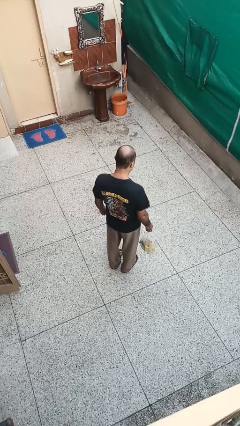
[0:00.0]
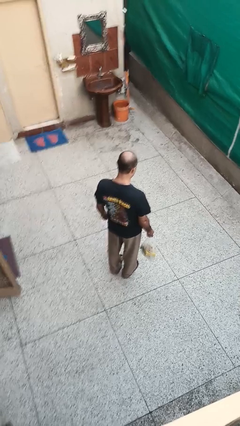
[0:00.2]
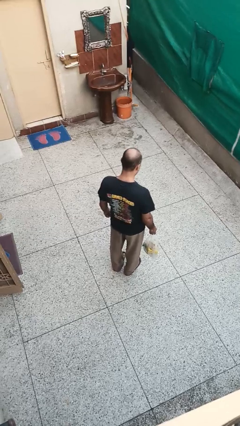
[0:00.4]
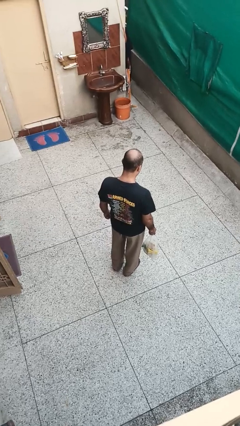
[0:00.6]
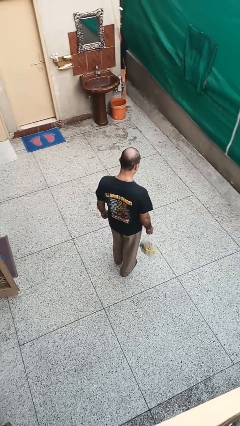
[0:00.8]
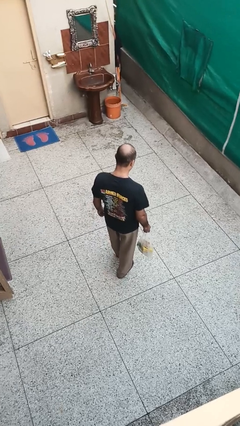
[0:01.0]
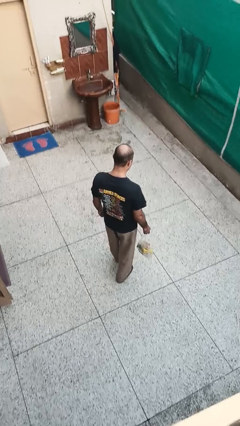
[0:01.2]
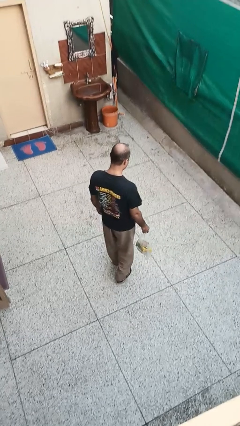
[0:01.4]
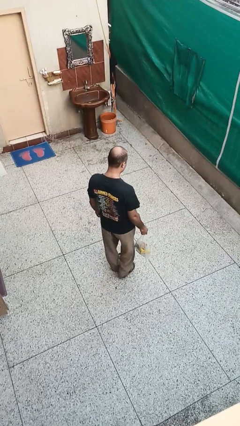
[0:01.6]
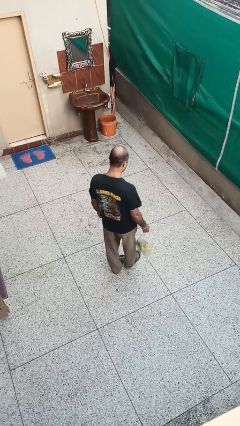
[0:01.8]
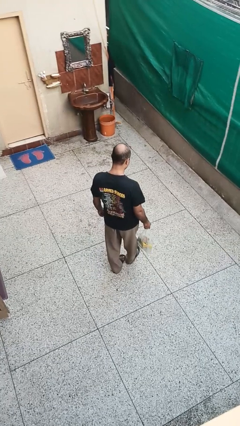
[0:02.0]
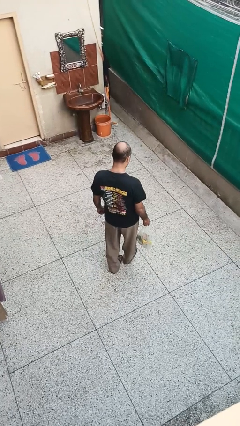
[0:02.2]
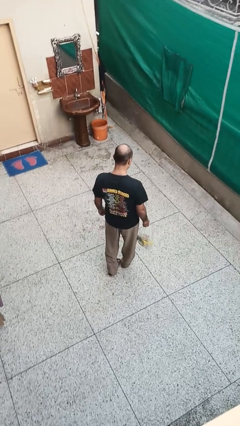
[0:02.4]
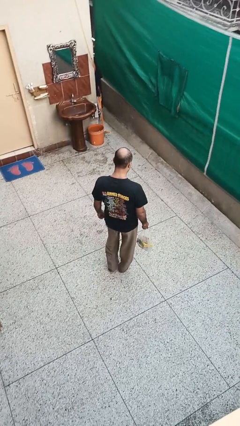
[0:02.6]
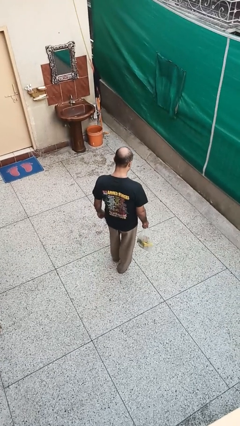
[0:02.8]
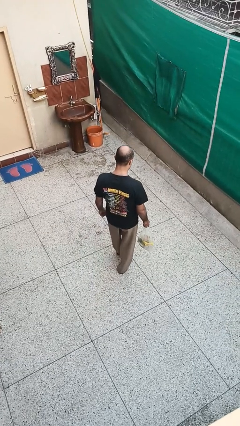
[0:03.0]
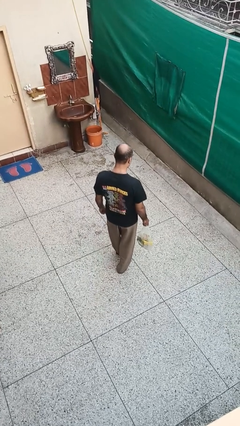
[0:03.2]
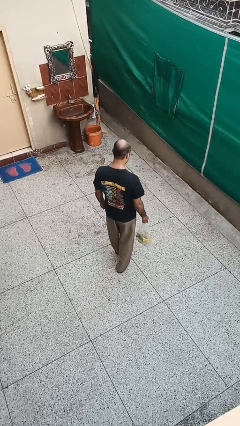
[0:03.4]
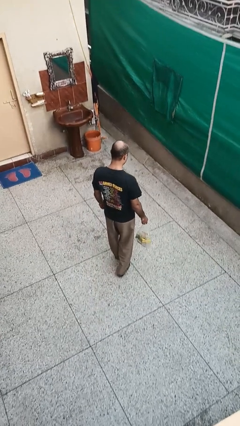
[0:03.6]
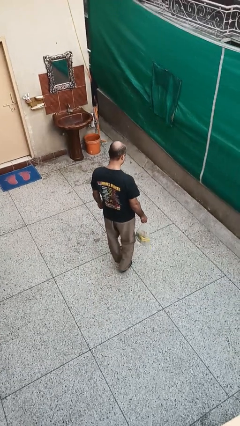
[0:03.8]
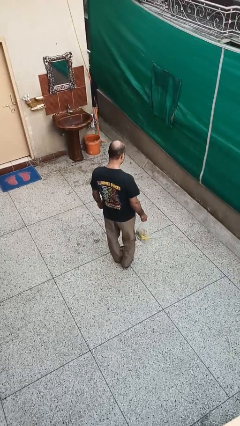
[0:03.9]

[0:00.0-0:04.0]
person carries groceries

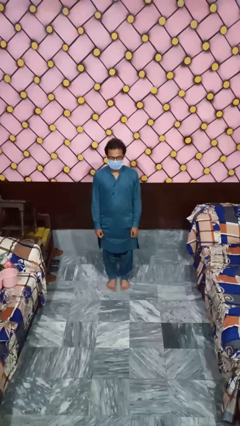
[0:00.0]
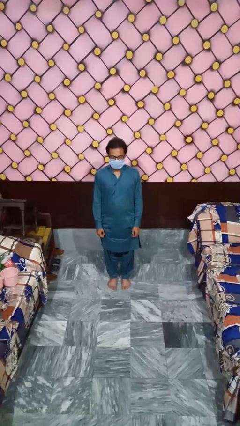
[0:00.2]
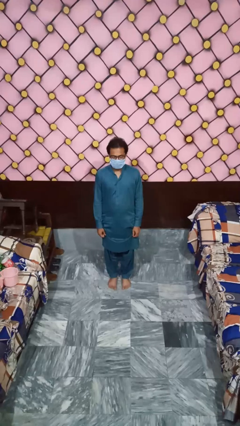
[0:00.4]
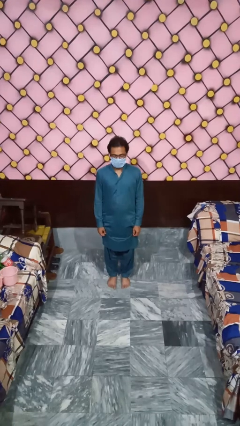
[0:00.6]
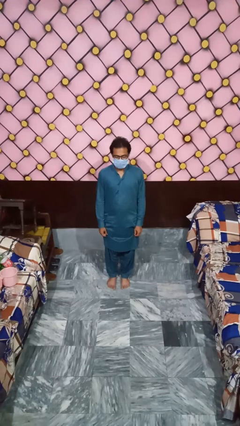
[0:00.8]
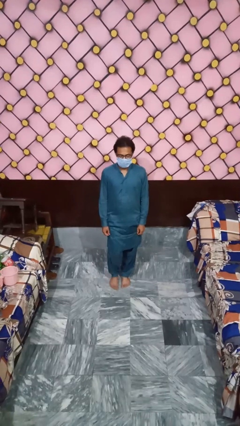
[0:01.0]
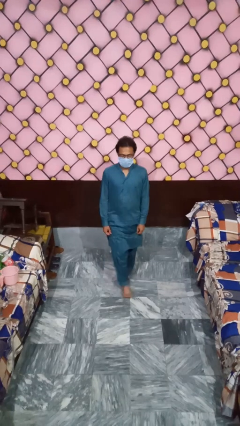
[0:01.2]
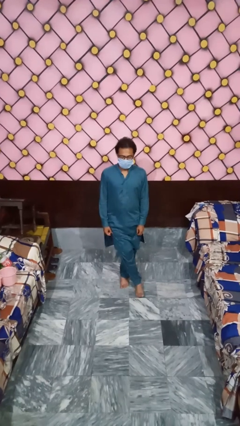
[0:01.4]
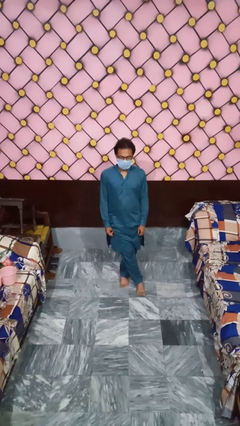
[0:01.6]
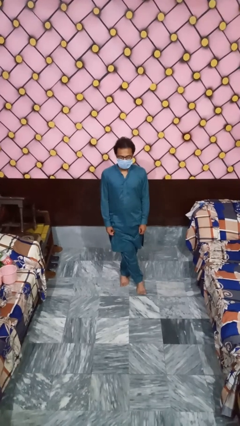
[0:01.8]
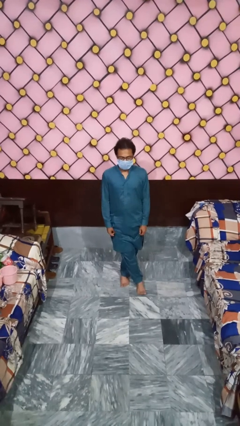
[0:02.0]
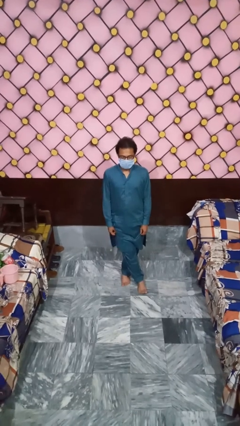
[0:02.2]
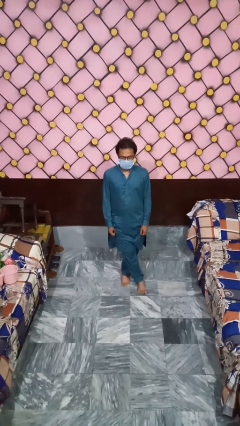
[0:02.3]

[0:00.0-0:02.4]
person crosses legs

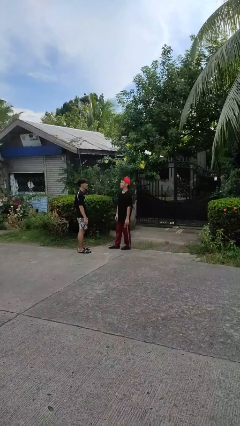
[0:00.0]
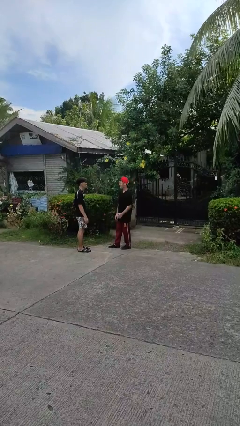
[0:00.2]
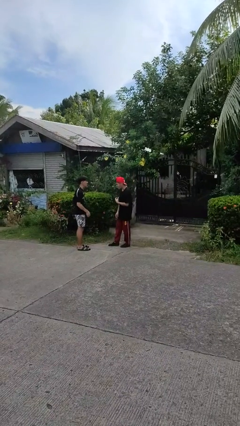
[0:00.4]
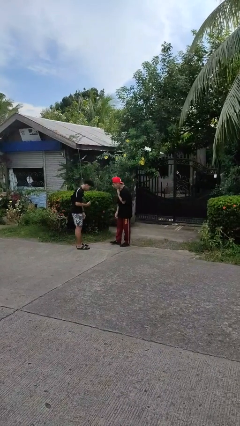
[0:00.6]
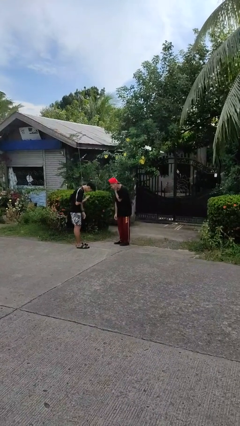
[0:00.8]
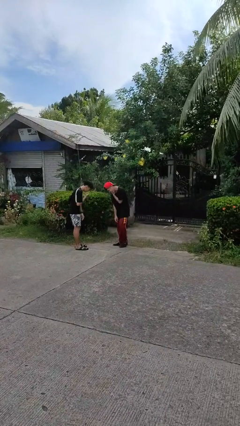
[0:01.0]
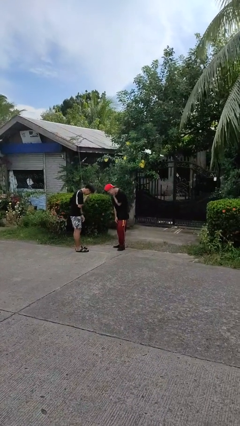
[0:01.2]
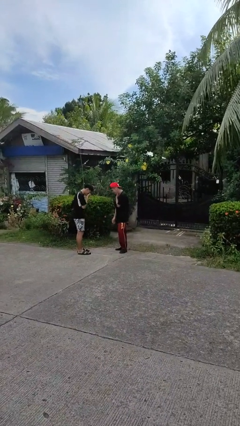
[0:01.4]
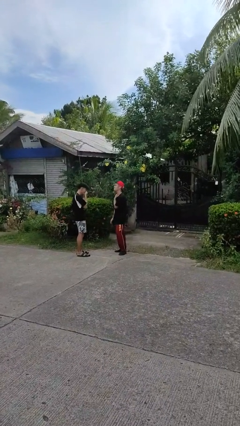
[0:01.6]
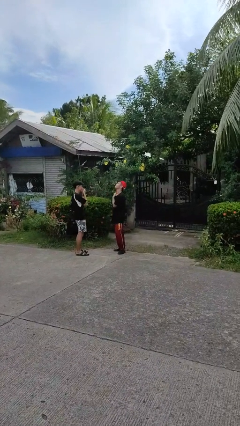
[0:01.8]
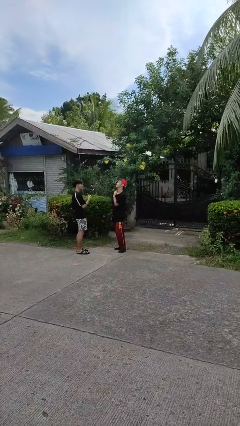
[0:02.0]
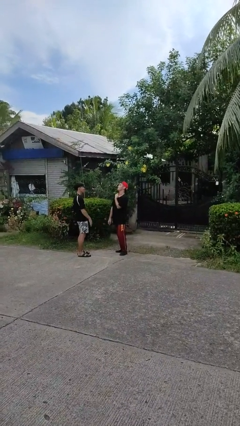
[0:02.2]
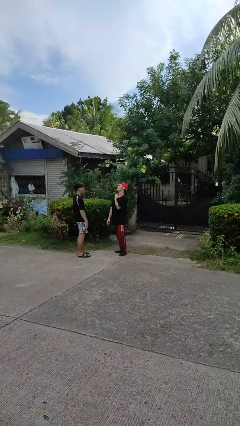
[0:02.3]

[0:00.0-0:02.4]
person laughs with person

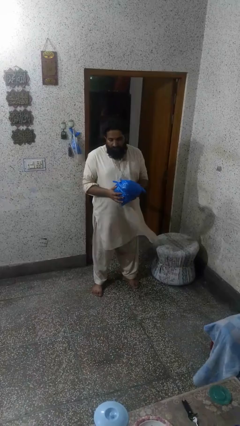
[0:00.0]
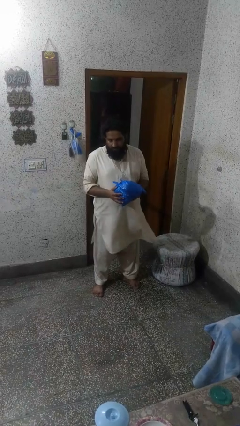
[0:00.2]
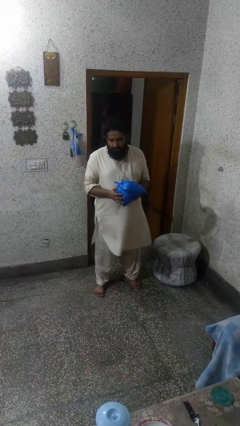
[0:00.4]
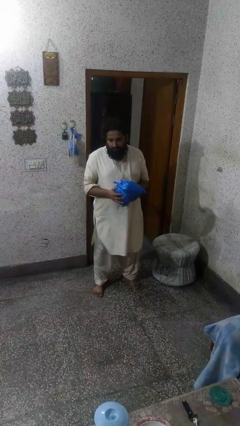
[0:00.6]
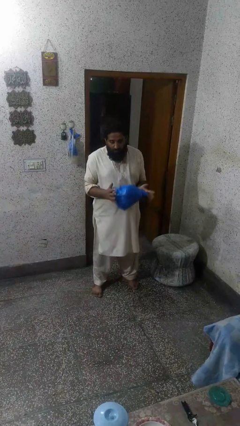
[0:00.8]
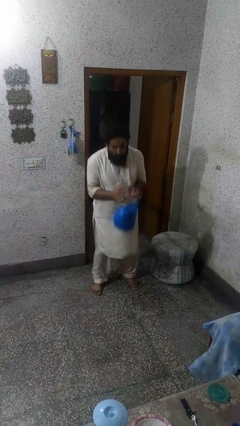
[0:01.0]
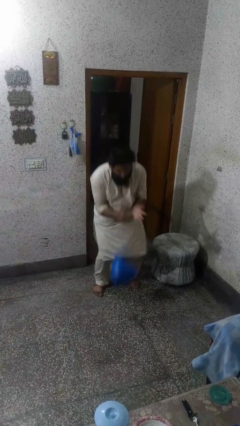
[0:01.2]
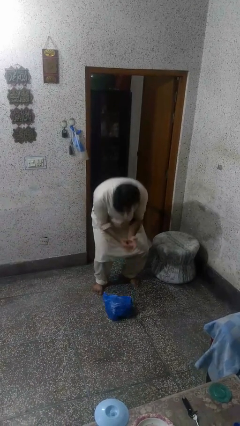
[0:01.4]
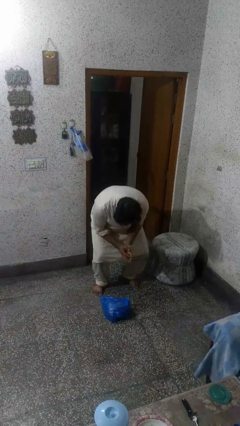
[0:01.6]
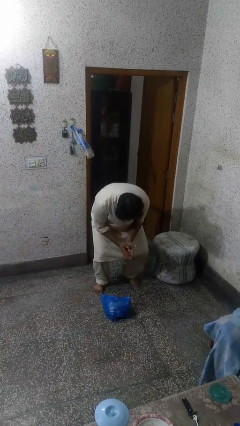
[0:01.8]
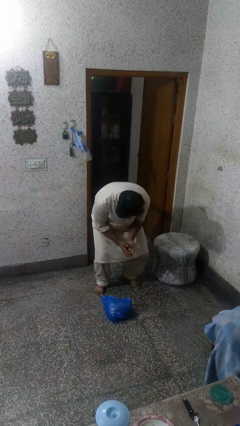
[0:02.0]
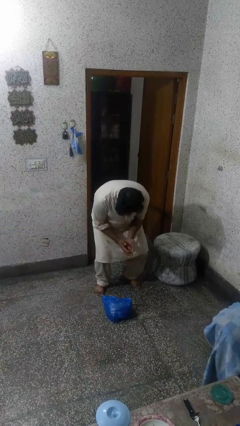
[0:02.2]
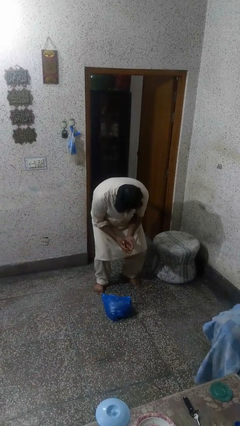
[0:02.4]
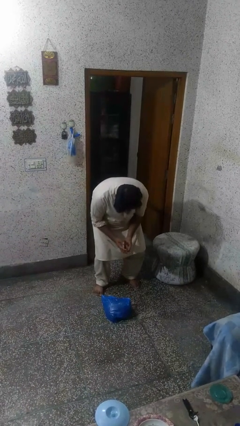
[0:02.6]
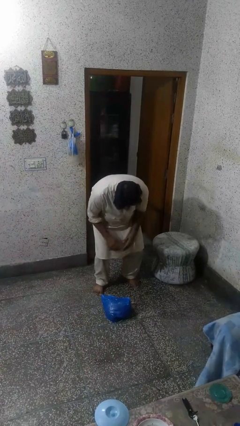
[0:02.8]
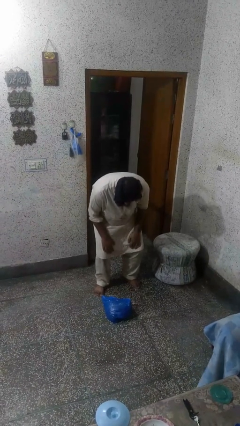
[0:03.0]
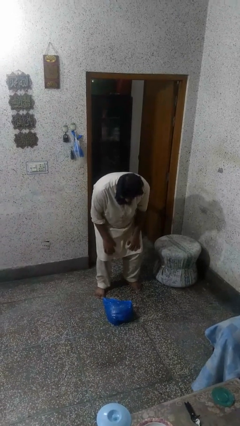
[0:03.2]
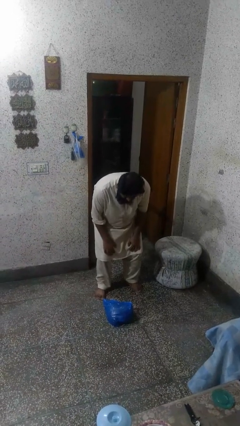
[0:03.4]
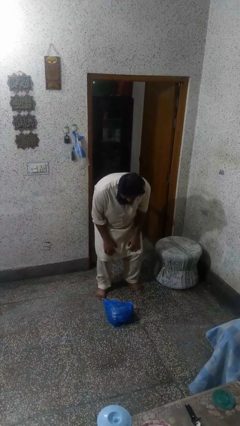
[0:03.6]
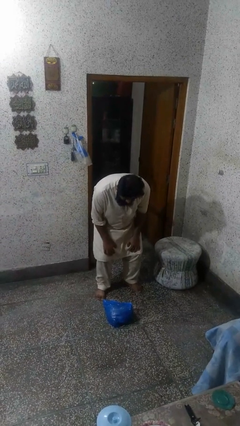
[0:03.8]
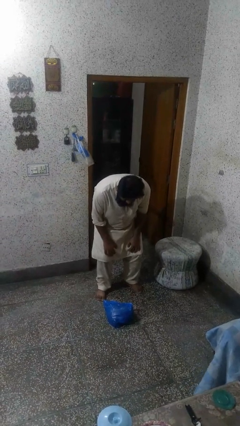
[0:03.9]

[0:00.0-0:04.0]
person drops object

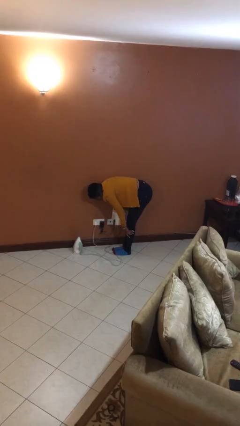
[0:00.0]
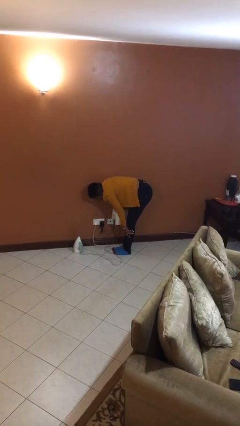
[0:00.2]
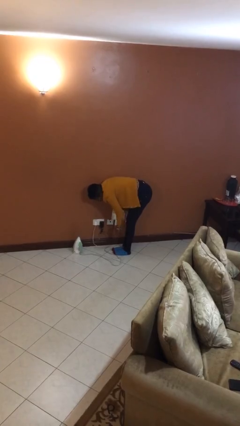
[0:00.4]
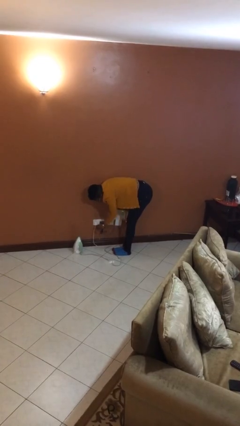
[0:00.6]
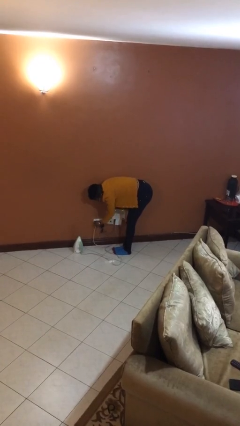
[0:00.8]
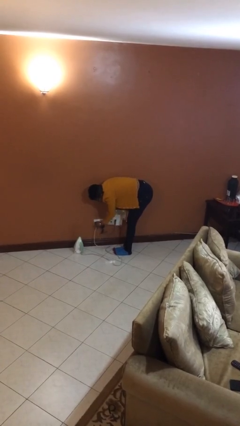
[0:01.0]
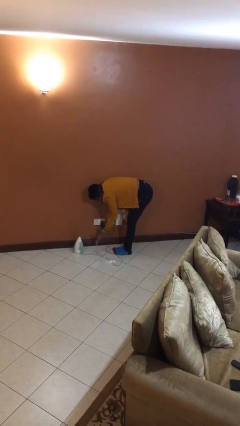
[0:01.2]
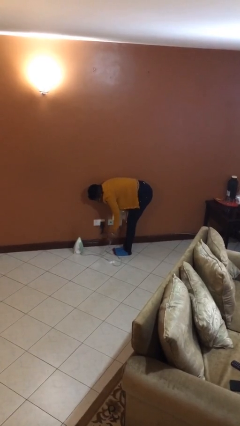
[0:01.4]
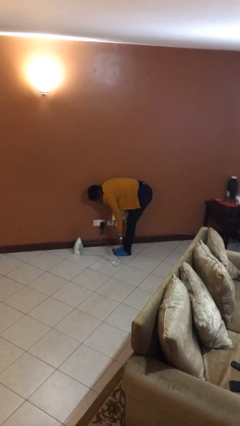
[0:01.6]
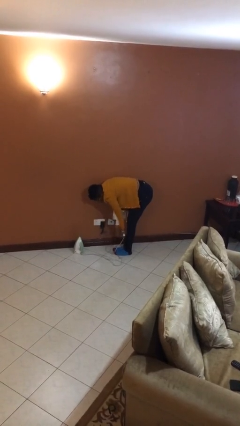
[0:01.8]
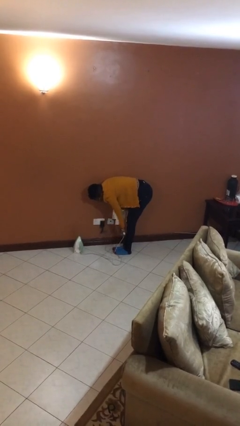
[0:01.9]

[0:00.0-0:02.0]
person unplugs from electrical socket

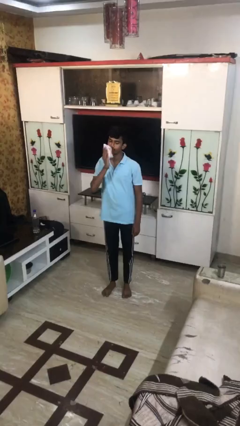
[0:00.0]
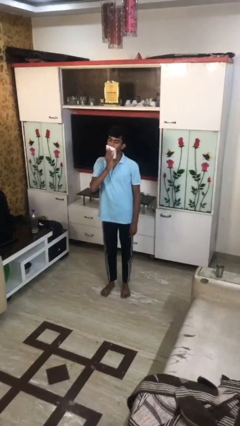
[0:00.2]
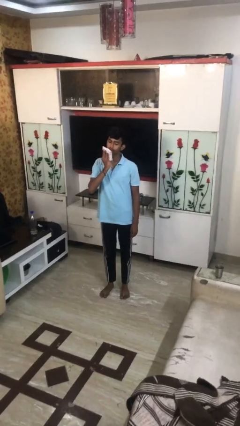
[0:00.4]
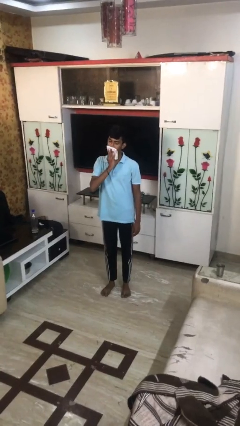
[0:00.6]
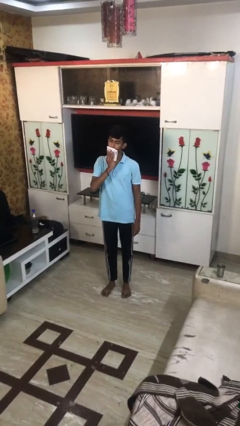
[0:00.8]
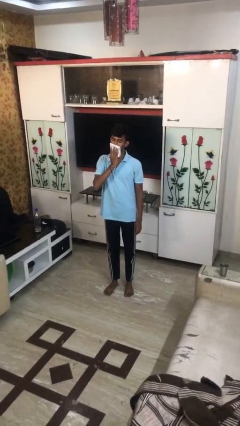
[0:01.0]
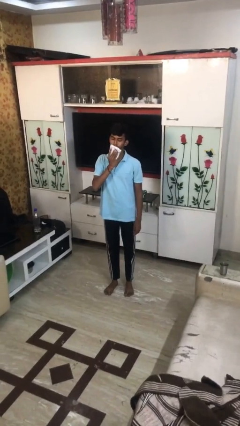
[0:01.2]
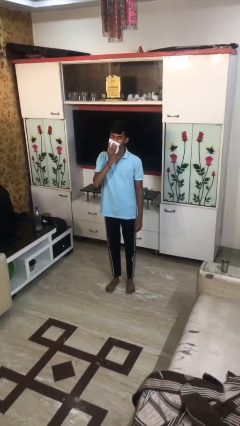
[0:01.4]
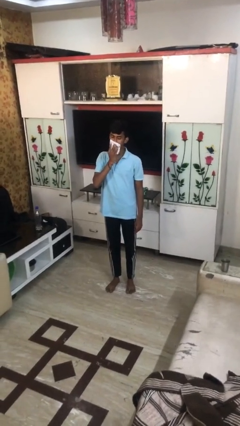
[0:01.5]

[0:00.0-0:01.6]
person wipes mouth with napkin

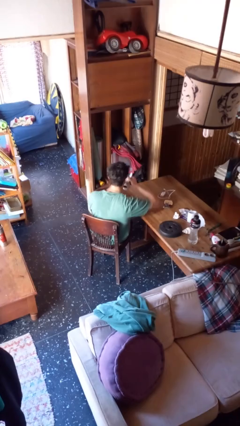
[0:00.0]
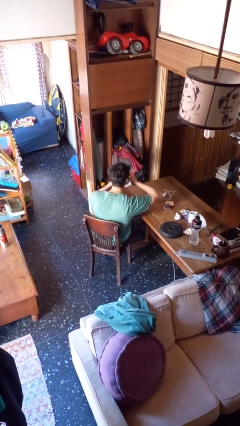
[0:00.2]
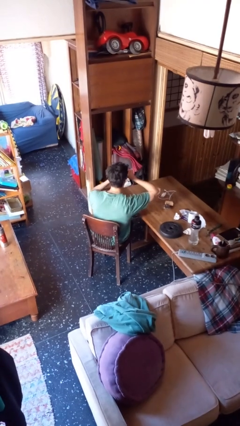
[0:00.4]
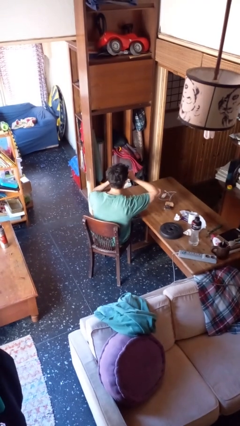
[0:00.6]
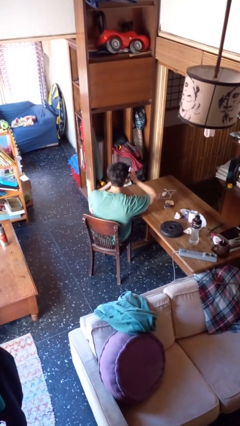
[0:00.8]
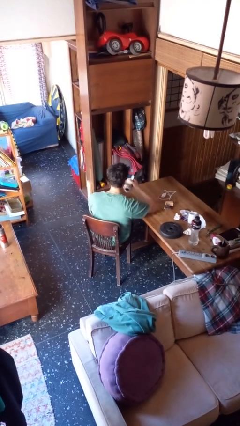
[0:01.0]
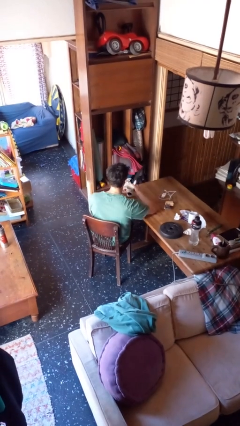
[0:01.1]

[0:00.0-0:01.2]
person drinks from mug
